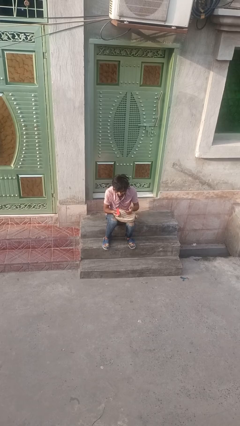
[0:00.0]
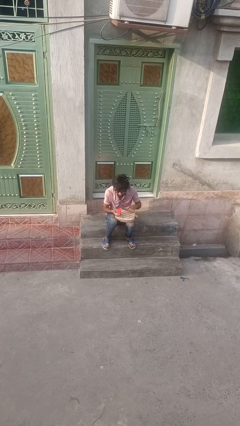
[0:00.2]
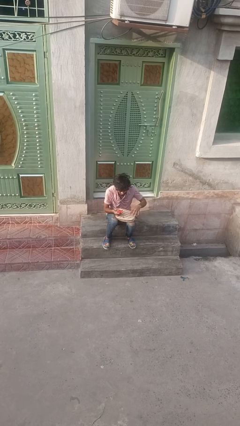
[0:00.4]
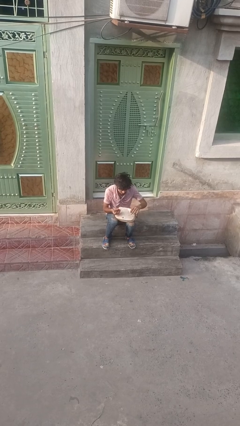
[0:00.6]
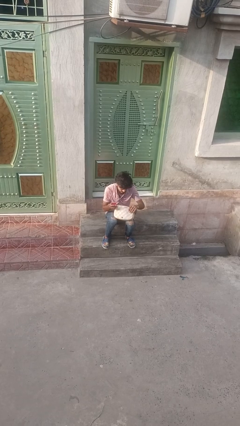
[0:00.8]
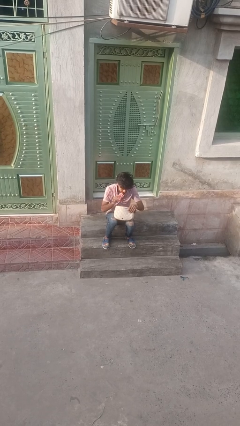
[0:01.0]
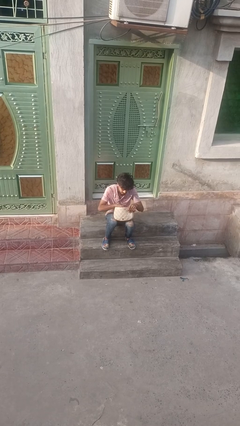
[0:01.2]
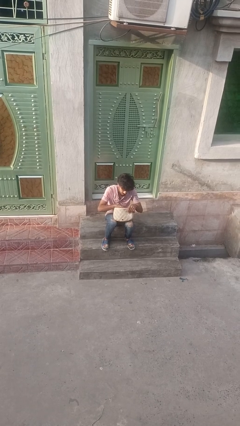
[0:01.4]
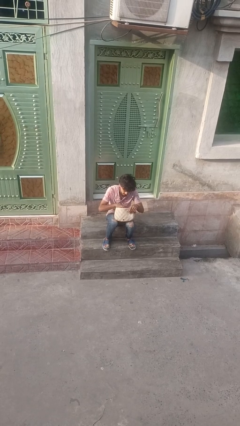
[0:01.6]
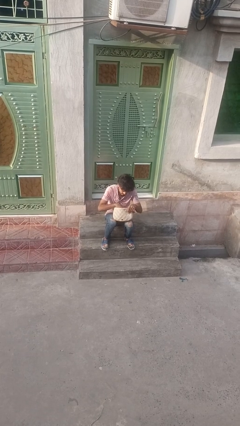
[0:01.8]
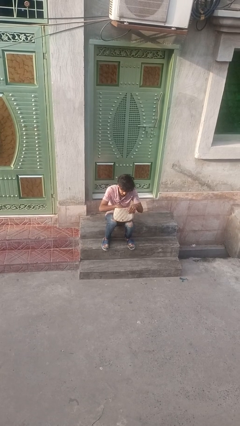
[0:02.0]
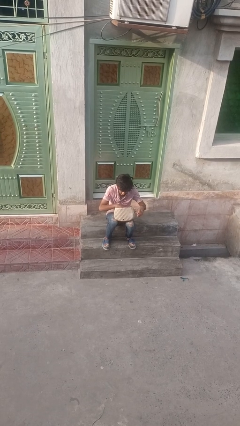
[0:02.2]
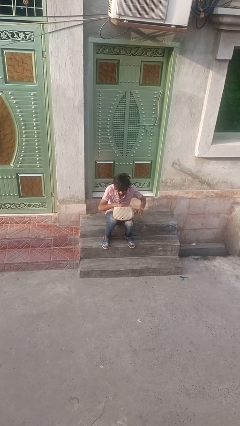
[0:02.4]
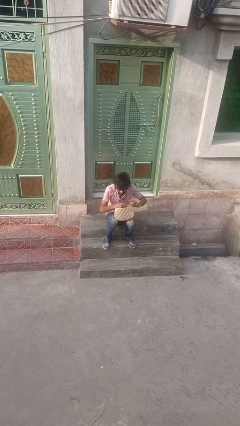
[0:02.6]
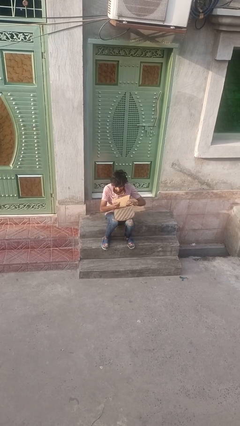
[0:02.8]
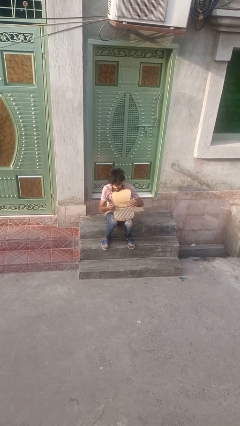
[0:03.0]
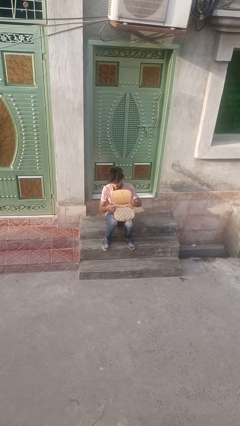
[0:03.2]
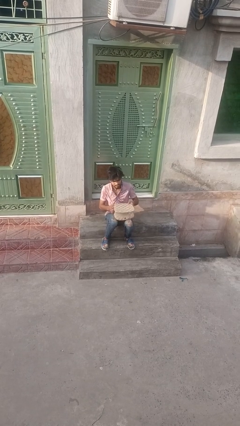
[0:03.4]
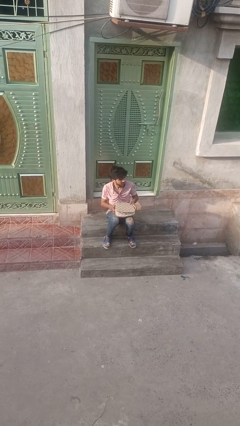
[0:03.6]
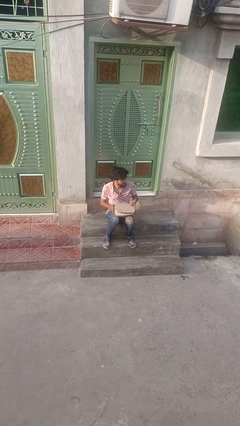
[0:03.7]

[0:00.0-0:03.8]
person puts object into backpack

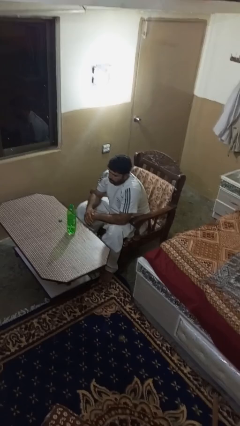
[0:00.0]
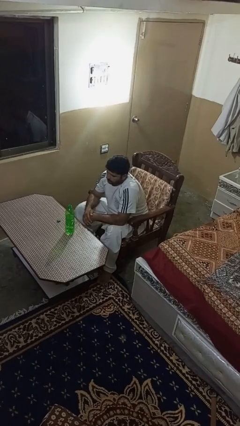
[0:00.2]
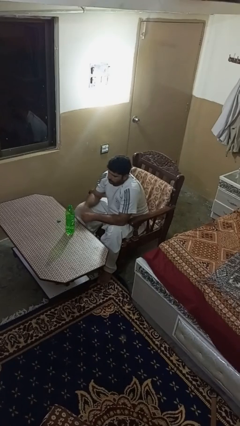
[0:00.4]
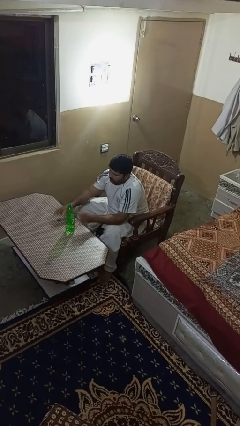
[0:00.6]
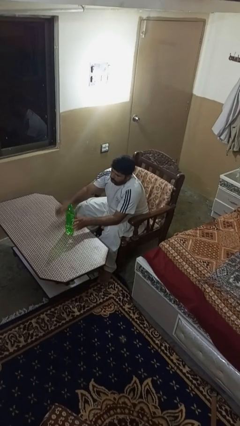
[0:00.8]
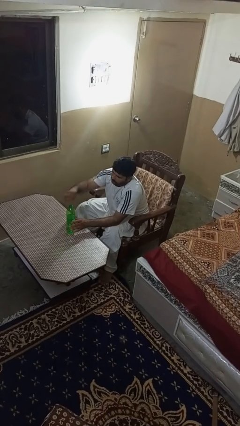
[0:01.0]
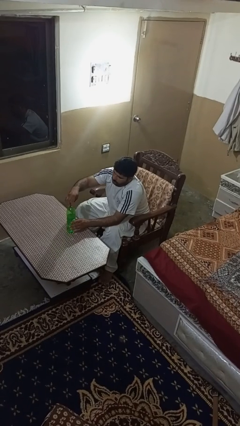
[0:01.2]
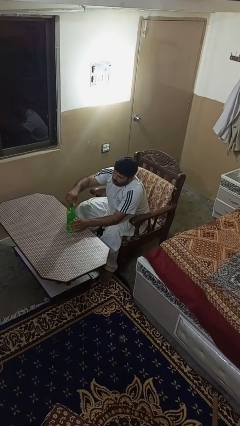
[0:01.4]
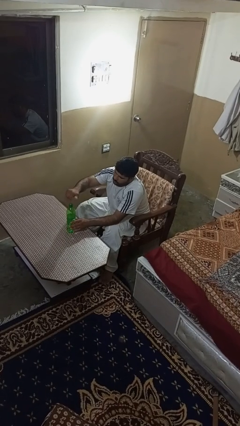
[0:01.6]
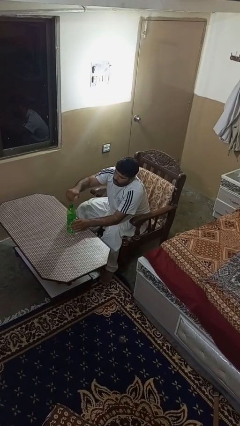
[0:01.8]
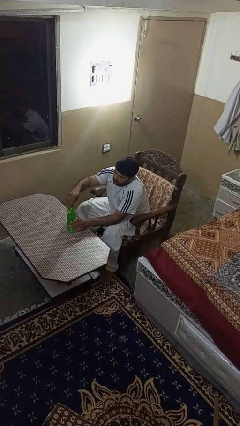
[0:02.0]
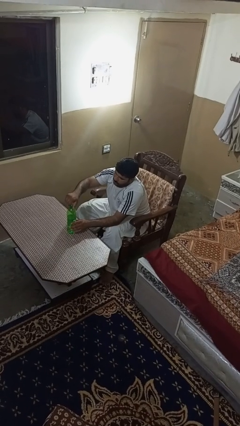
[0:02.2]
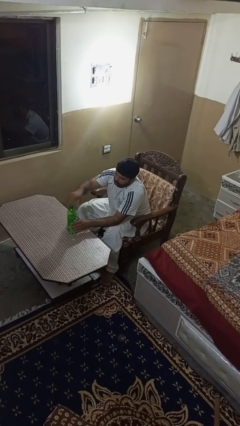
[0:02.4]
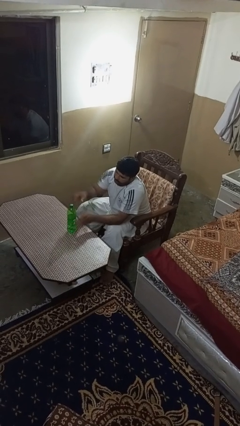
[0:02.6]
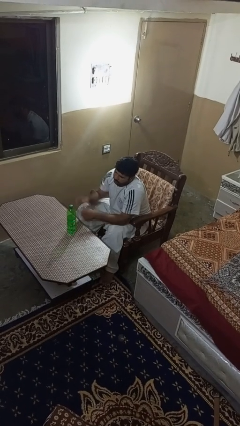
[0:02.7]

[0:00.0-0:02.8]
person screws lid to bottle

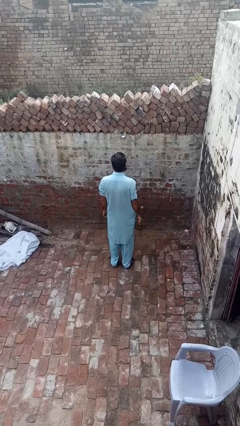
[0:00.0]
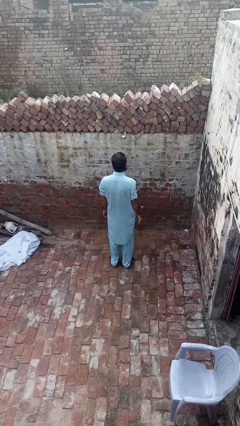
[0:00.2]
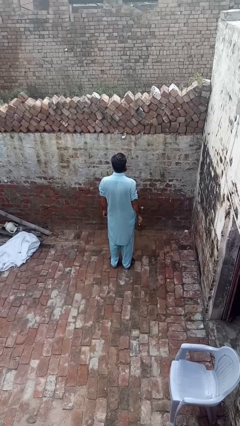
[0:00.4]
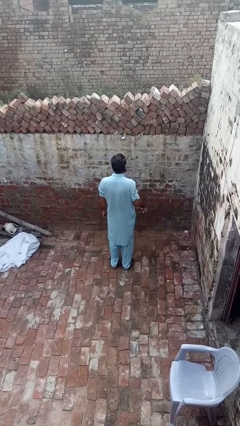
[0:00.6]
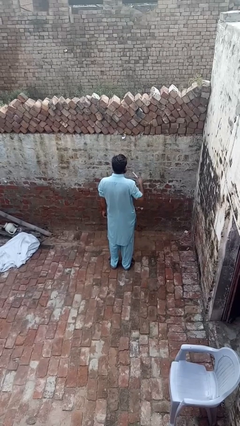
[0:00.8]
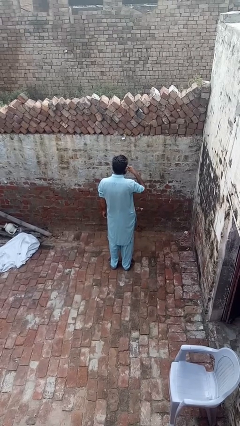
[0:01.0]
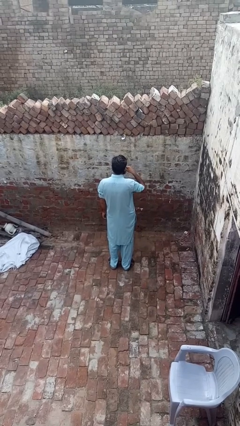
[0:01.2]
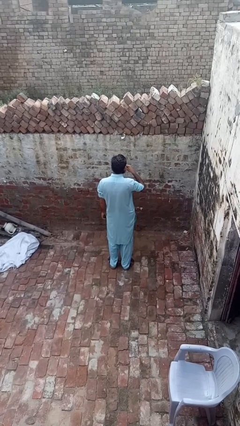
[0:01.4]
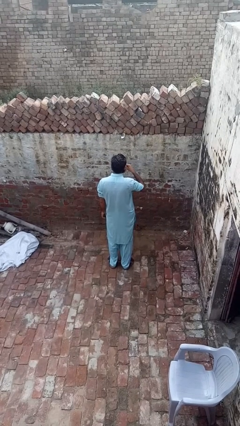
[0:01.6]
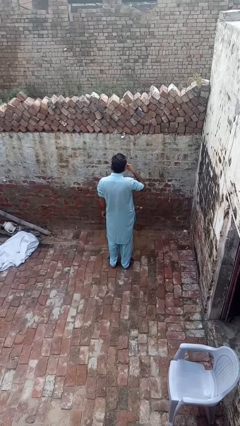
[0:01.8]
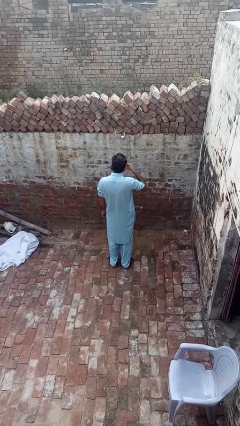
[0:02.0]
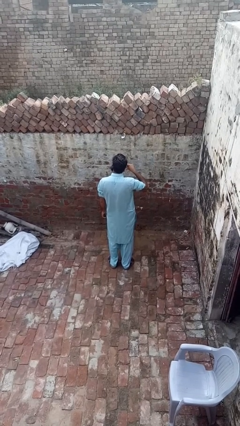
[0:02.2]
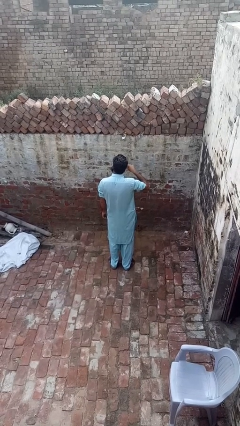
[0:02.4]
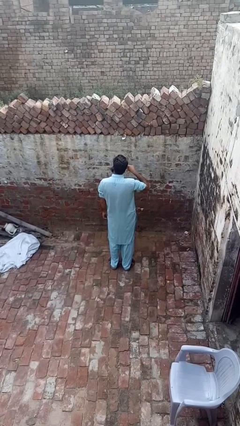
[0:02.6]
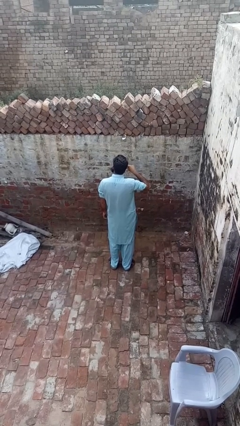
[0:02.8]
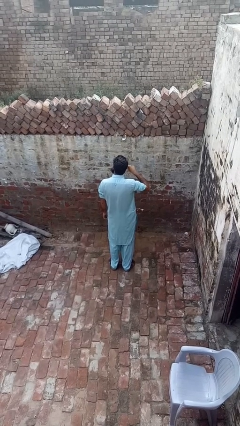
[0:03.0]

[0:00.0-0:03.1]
person brushes teeth

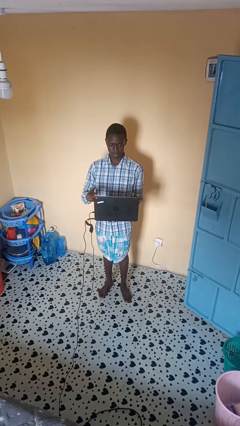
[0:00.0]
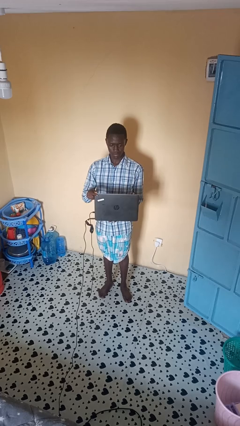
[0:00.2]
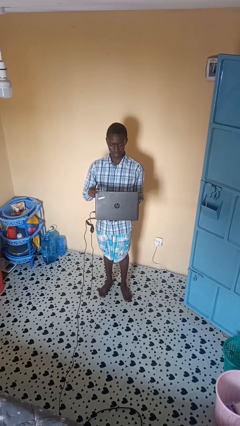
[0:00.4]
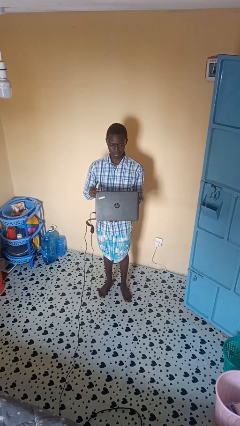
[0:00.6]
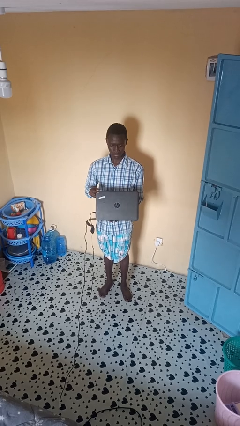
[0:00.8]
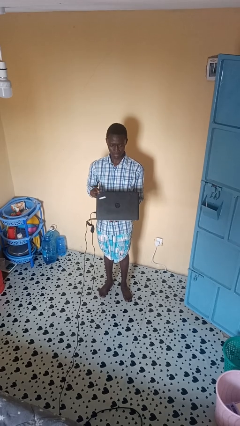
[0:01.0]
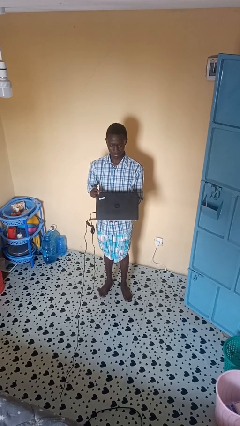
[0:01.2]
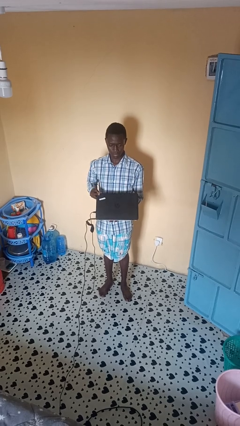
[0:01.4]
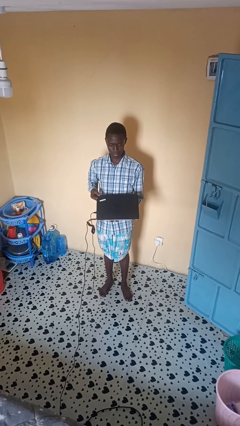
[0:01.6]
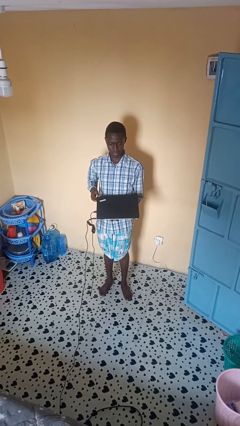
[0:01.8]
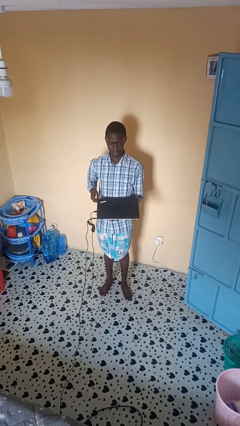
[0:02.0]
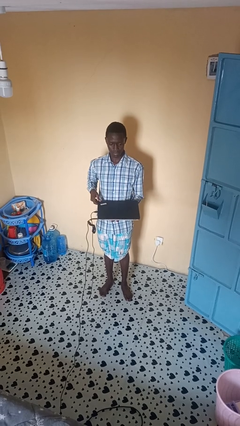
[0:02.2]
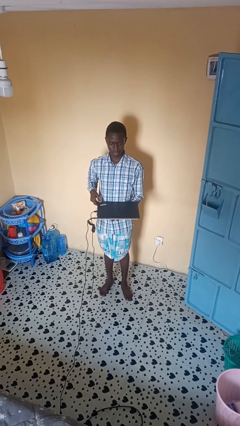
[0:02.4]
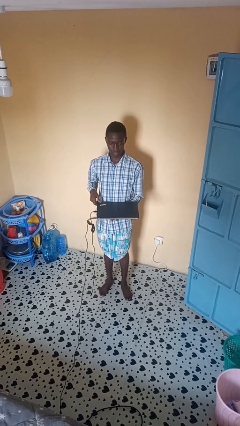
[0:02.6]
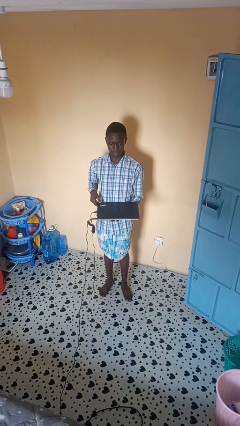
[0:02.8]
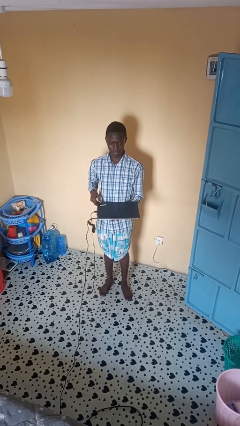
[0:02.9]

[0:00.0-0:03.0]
person closes laptop

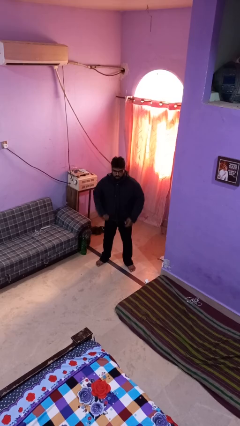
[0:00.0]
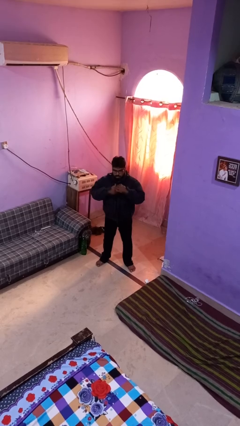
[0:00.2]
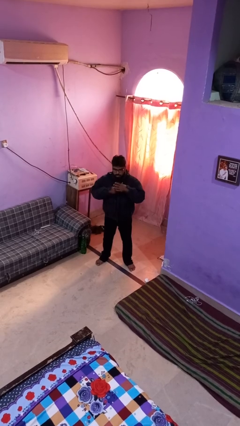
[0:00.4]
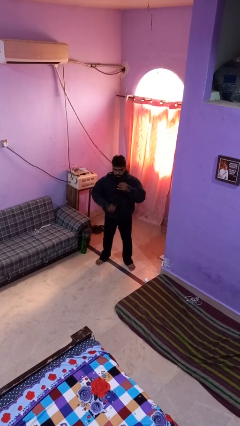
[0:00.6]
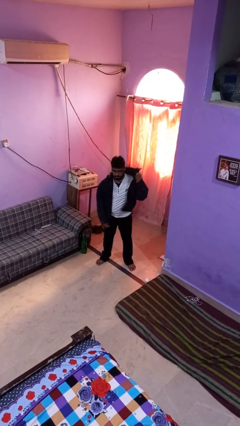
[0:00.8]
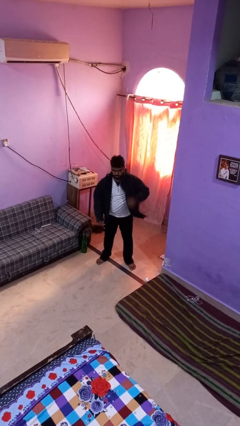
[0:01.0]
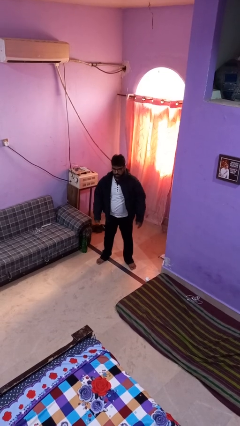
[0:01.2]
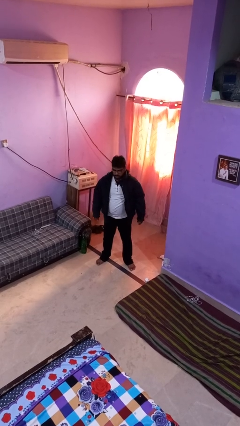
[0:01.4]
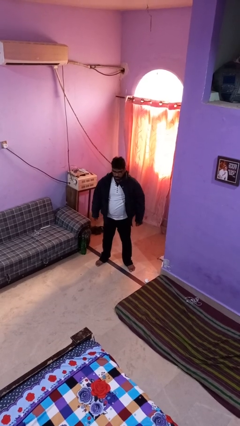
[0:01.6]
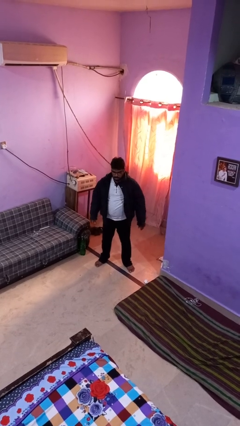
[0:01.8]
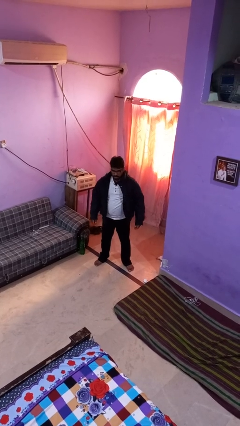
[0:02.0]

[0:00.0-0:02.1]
person unzips jacket

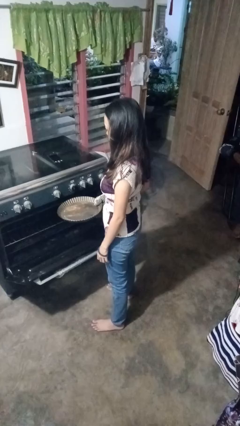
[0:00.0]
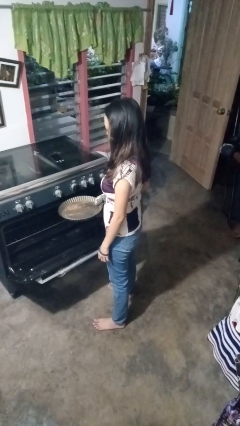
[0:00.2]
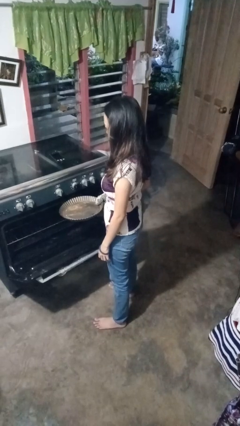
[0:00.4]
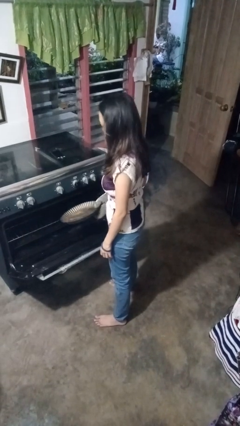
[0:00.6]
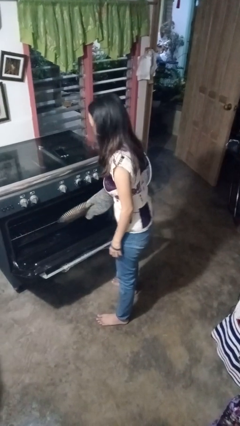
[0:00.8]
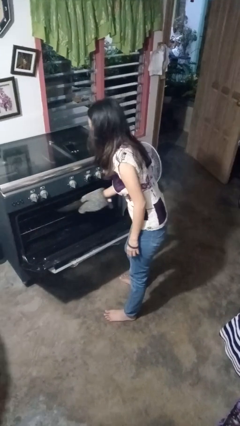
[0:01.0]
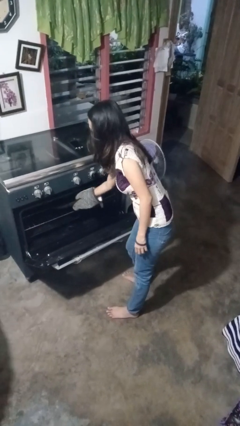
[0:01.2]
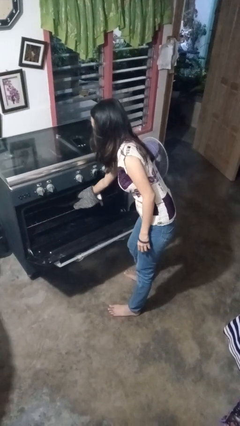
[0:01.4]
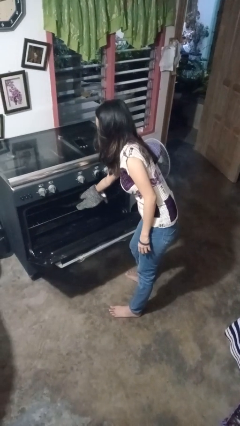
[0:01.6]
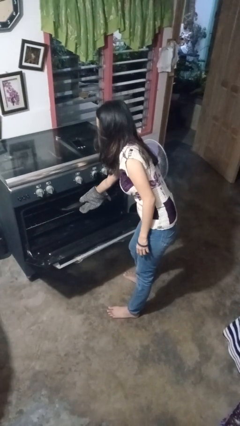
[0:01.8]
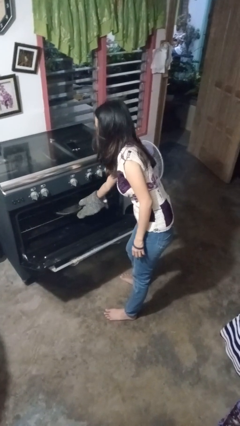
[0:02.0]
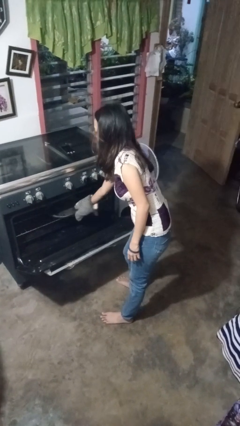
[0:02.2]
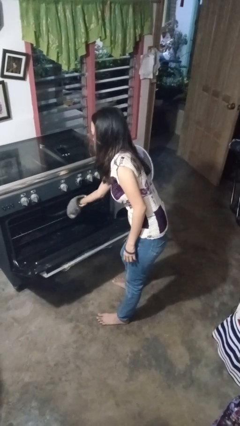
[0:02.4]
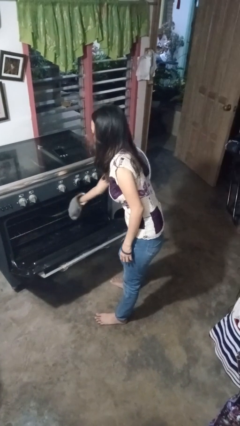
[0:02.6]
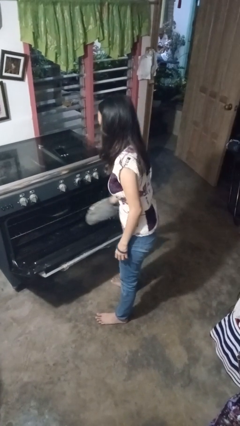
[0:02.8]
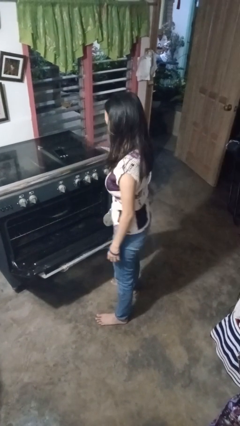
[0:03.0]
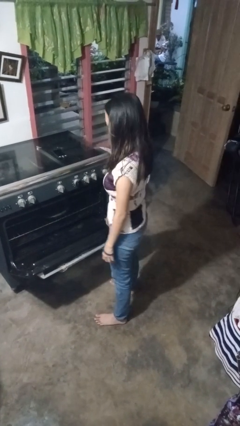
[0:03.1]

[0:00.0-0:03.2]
person puts object into oven
